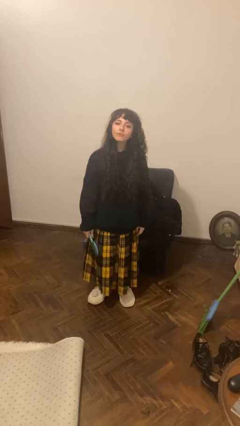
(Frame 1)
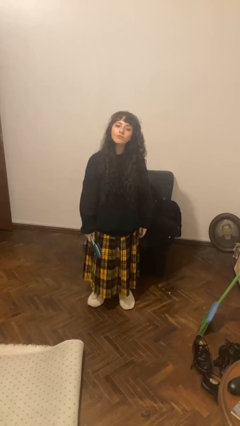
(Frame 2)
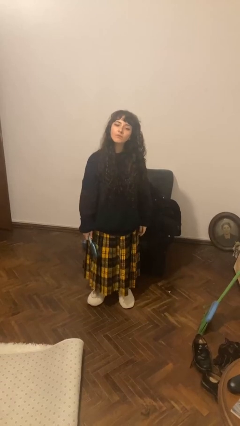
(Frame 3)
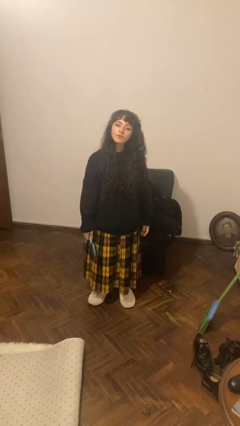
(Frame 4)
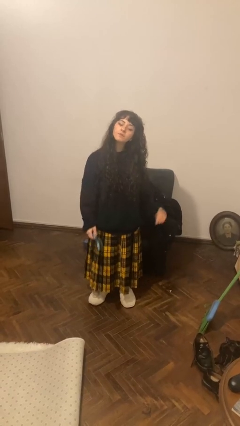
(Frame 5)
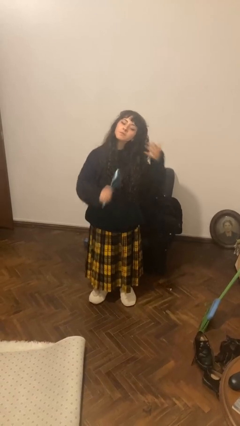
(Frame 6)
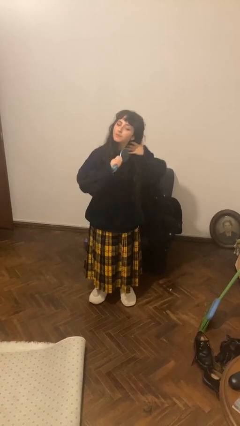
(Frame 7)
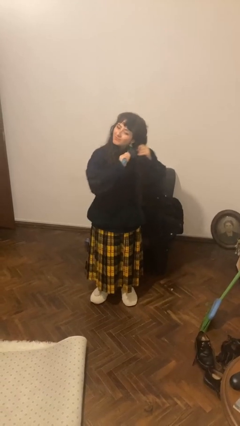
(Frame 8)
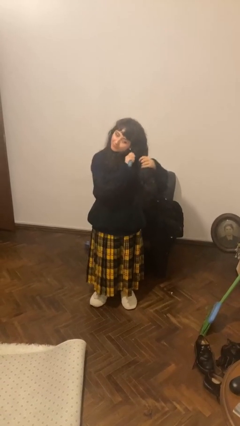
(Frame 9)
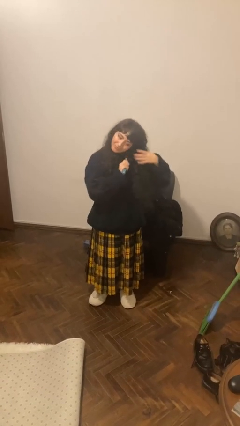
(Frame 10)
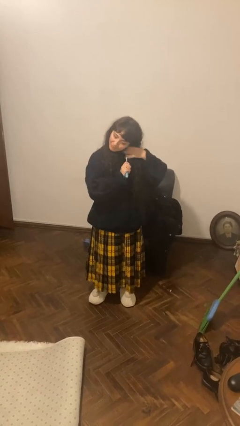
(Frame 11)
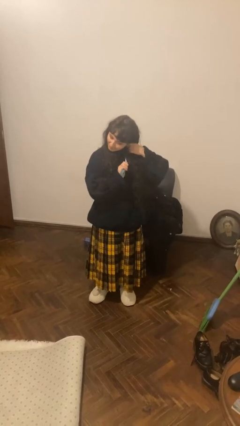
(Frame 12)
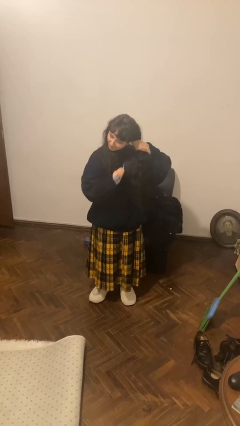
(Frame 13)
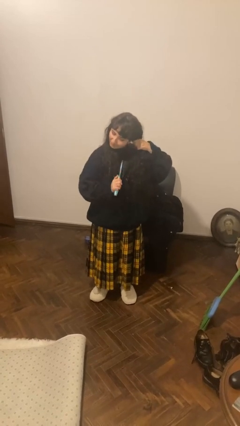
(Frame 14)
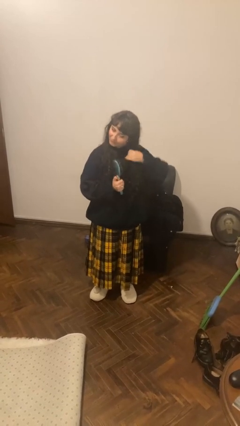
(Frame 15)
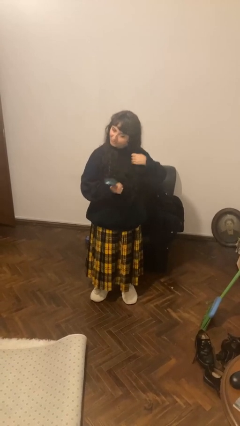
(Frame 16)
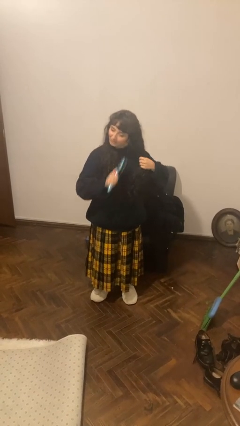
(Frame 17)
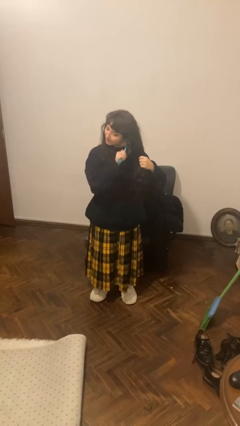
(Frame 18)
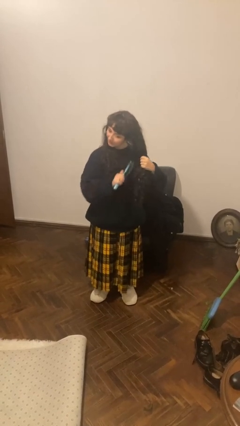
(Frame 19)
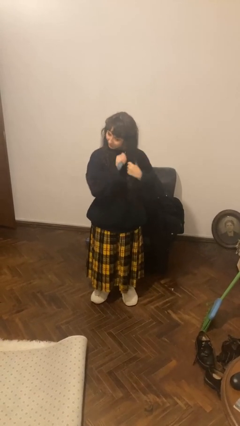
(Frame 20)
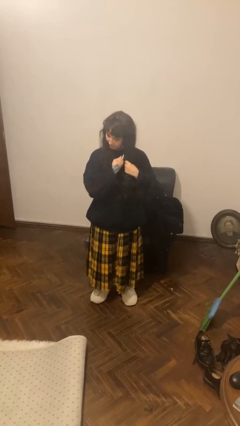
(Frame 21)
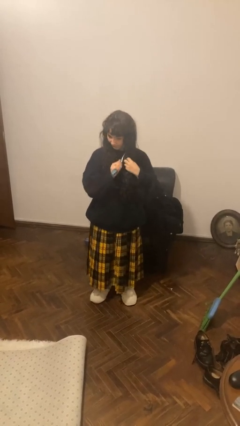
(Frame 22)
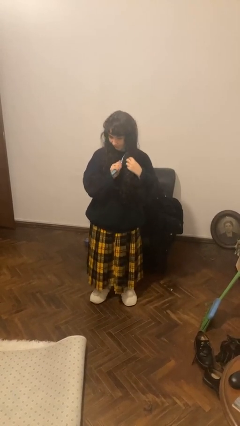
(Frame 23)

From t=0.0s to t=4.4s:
person brushes hair

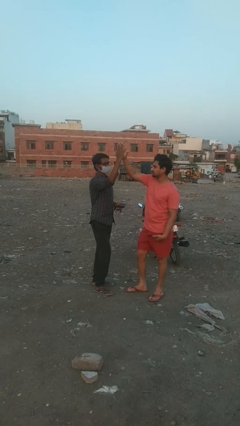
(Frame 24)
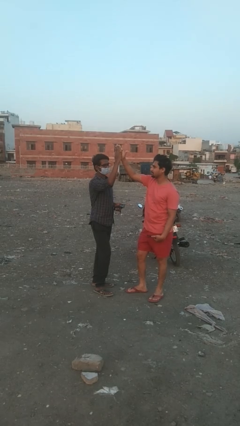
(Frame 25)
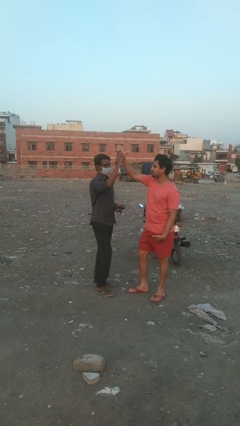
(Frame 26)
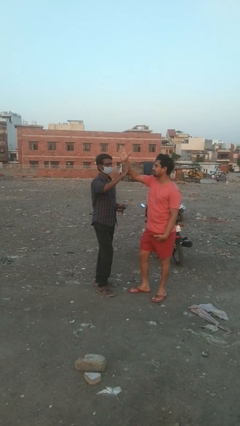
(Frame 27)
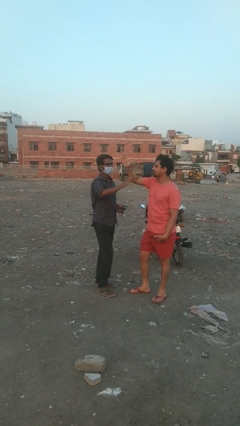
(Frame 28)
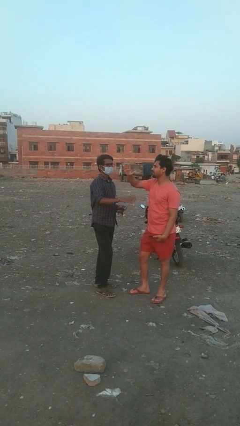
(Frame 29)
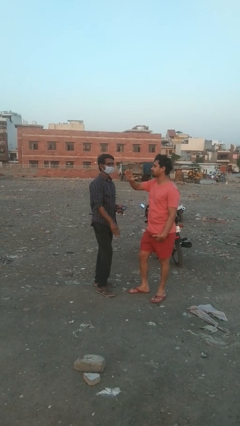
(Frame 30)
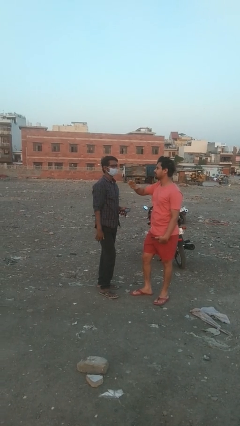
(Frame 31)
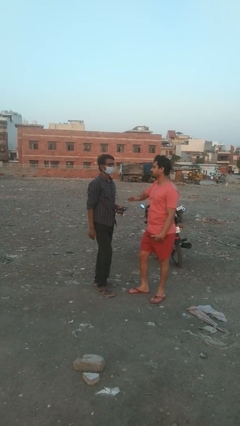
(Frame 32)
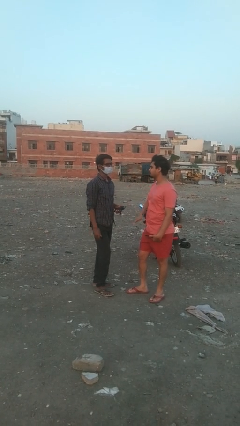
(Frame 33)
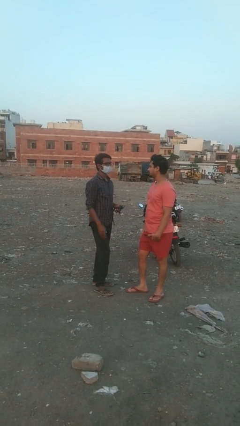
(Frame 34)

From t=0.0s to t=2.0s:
person highfives hand

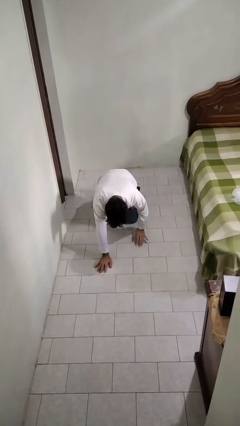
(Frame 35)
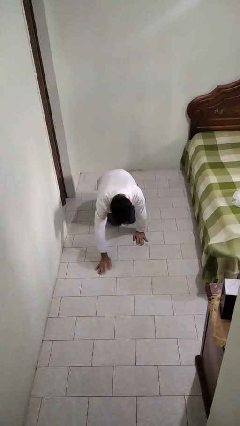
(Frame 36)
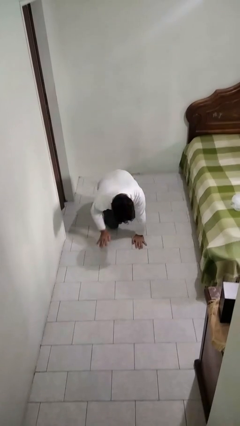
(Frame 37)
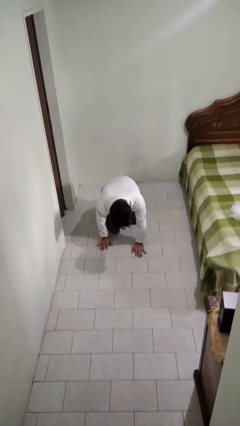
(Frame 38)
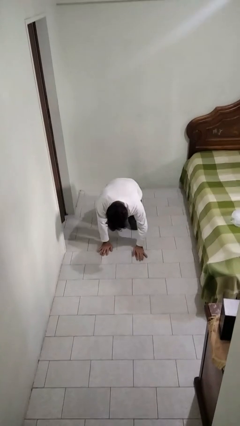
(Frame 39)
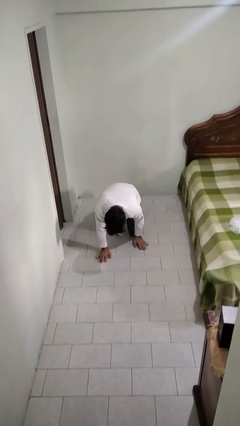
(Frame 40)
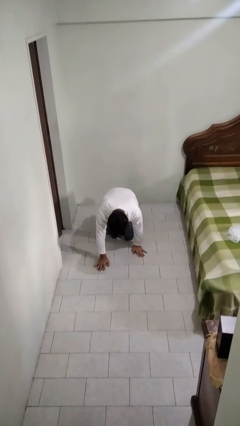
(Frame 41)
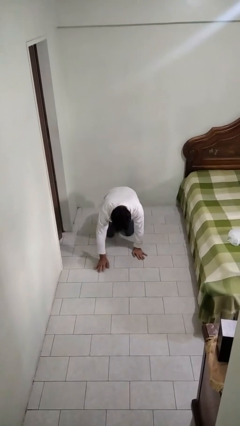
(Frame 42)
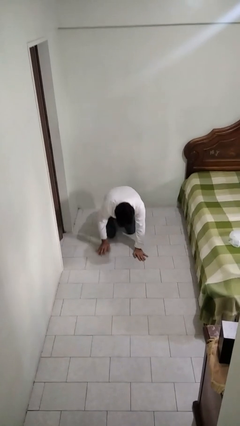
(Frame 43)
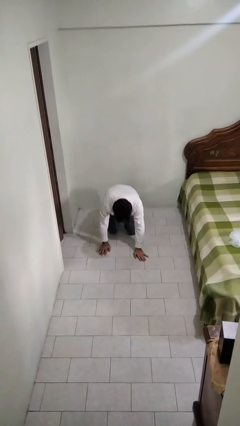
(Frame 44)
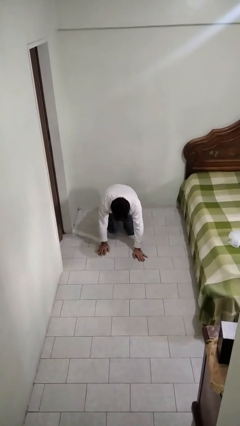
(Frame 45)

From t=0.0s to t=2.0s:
person crawls

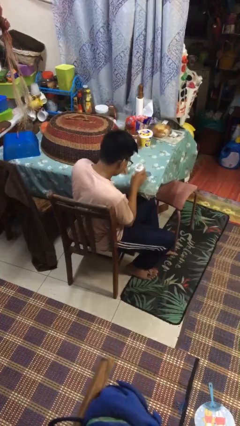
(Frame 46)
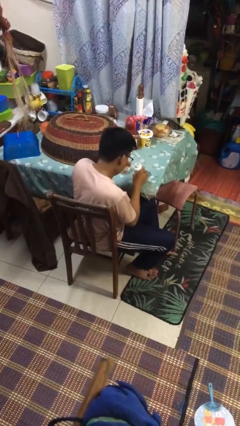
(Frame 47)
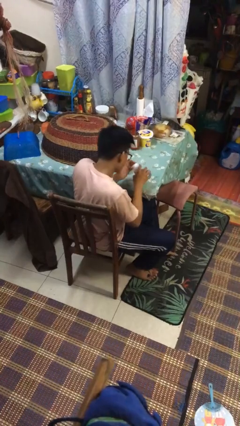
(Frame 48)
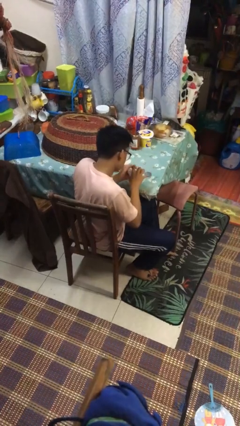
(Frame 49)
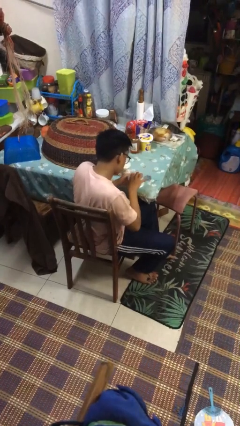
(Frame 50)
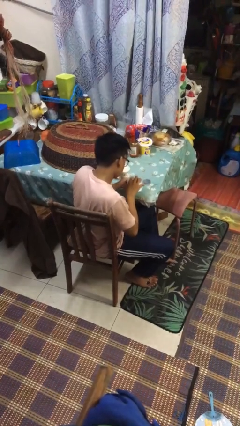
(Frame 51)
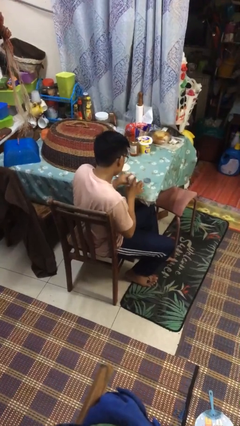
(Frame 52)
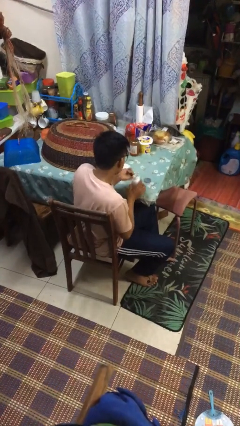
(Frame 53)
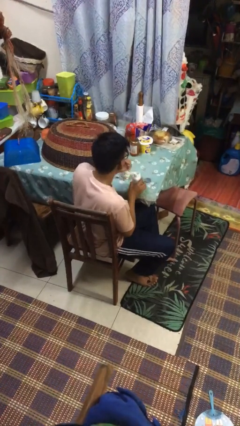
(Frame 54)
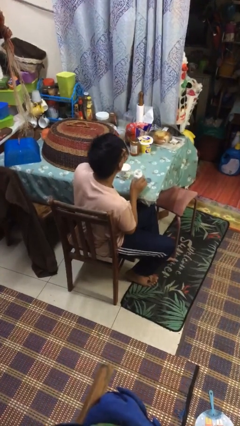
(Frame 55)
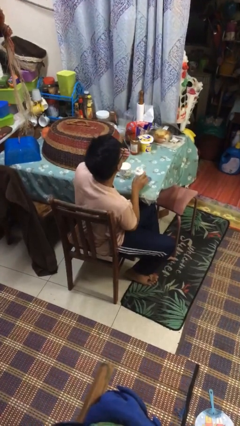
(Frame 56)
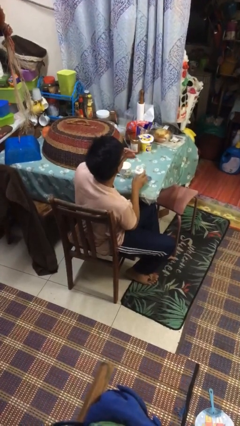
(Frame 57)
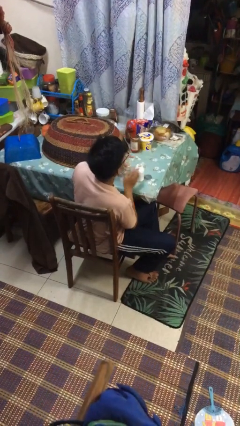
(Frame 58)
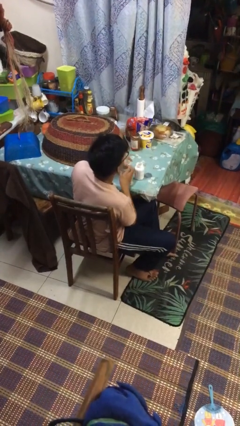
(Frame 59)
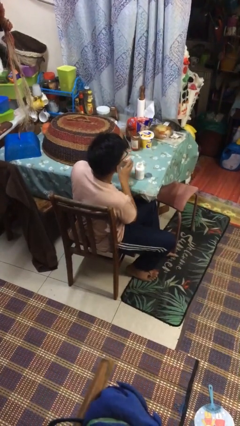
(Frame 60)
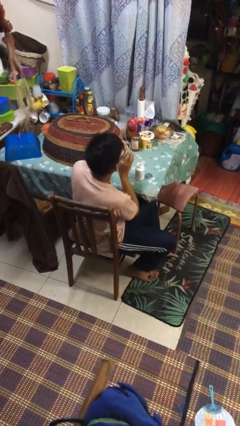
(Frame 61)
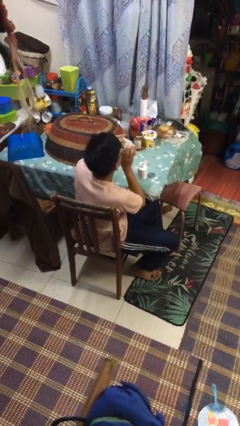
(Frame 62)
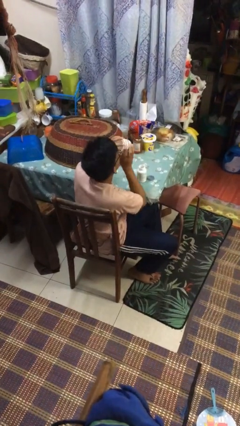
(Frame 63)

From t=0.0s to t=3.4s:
person takes medicine pills

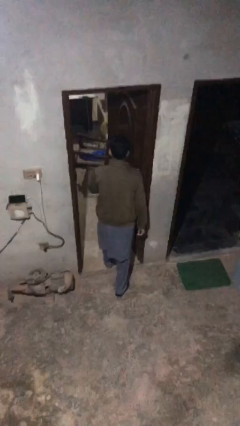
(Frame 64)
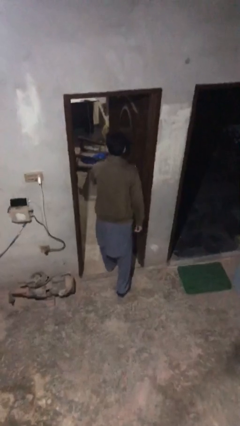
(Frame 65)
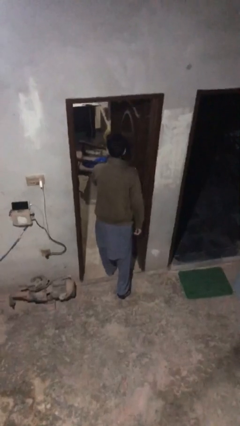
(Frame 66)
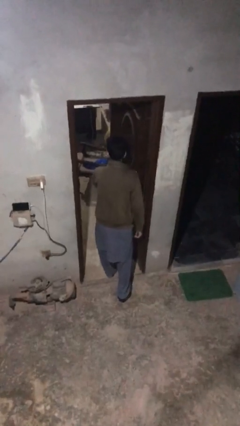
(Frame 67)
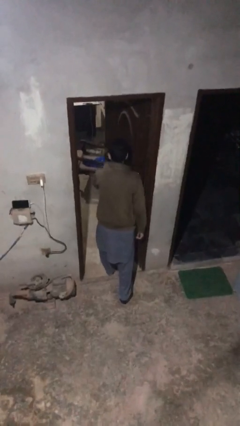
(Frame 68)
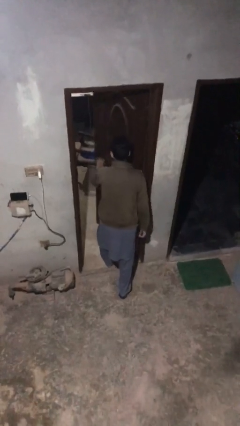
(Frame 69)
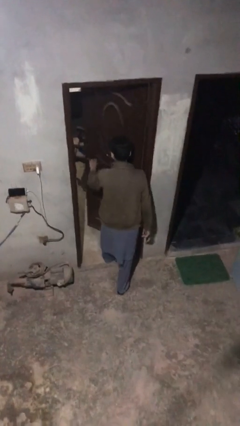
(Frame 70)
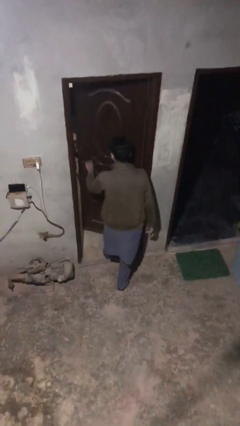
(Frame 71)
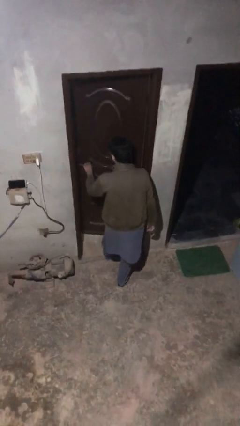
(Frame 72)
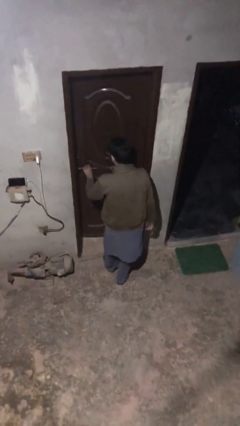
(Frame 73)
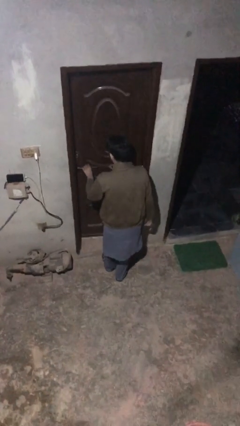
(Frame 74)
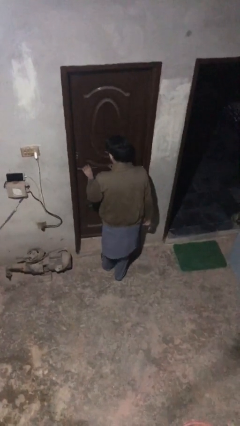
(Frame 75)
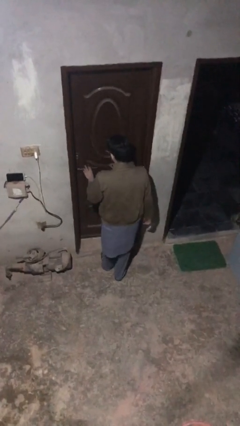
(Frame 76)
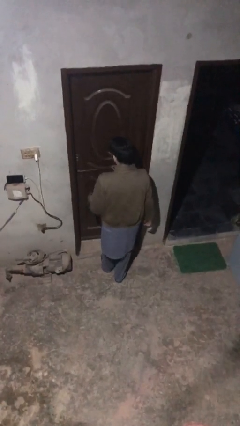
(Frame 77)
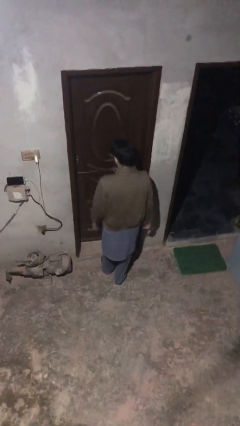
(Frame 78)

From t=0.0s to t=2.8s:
person closes facility door

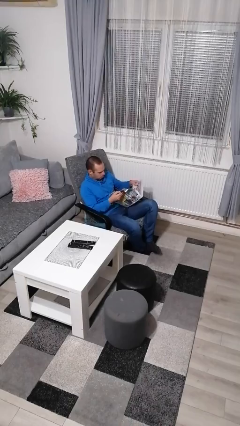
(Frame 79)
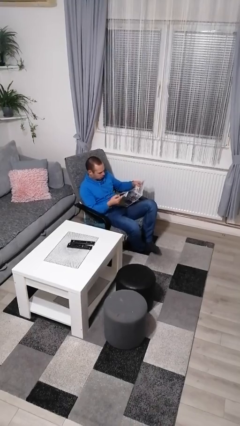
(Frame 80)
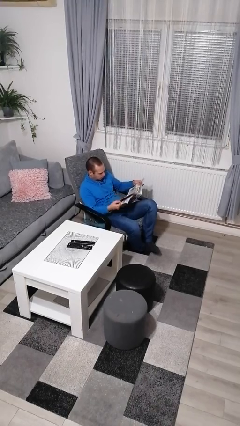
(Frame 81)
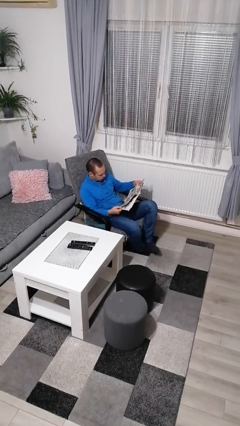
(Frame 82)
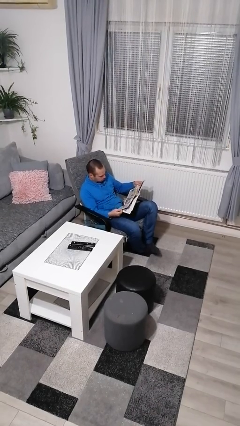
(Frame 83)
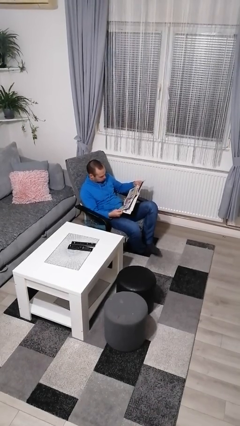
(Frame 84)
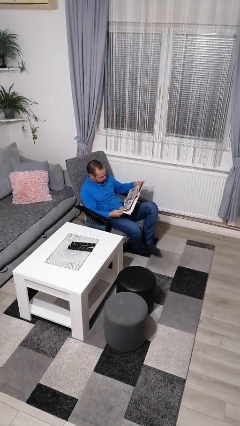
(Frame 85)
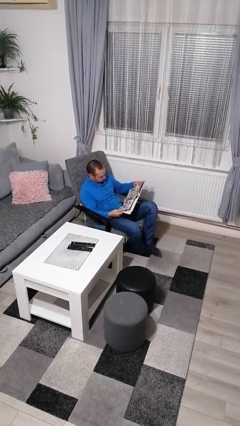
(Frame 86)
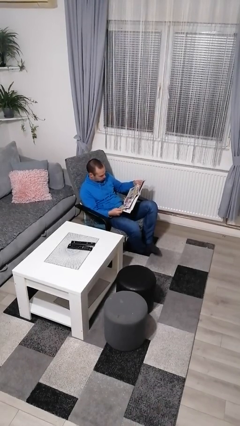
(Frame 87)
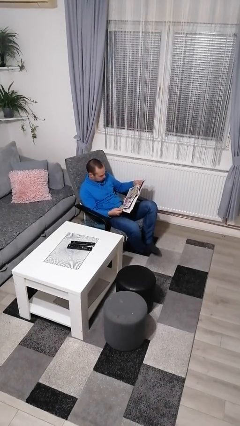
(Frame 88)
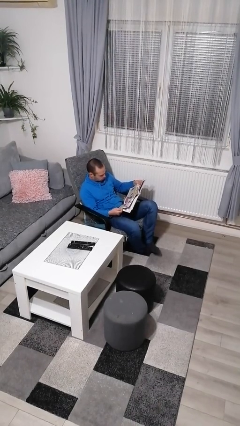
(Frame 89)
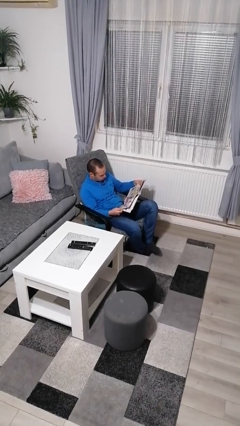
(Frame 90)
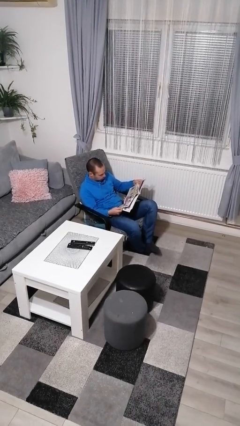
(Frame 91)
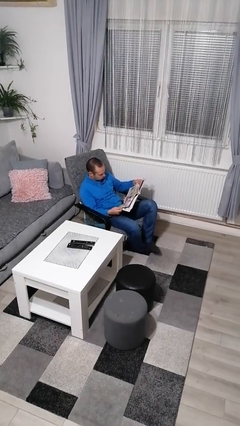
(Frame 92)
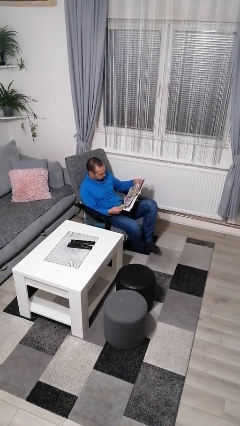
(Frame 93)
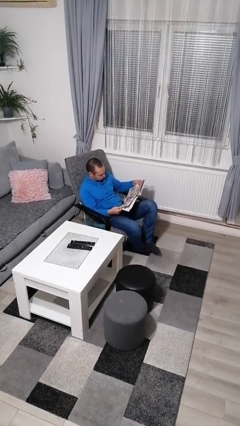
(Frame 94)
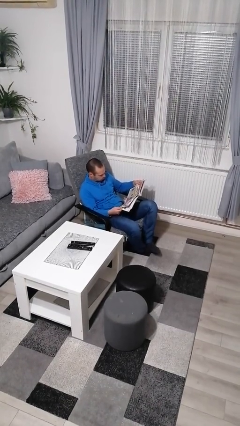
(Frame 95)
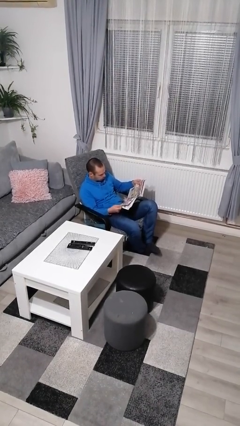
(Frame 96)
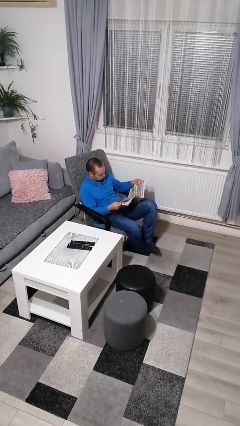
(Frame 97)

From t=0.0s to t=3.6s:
person reads newspaper
